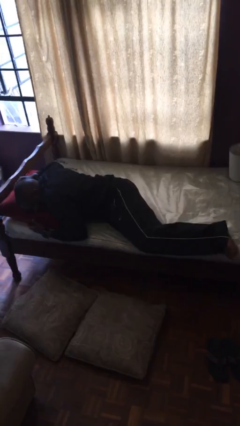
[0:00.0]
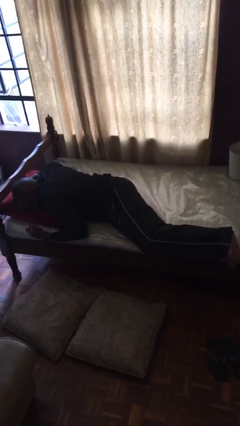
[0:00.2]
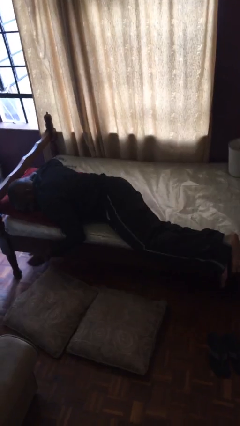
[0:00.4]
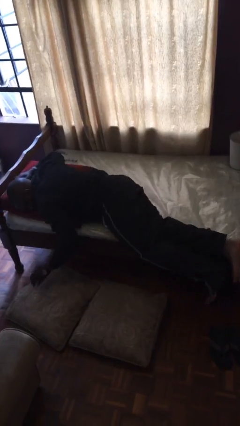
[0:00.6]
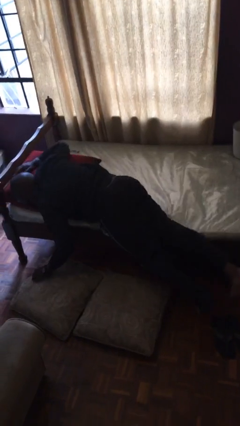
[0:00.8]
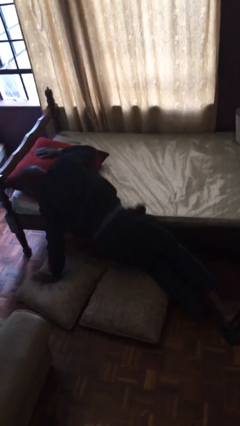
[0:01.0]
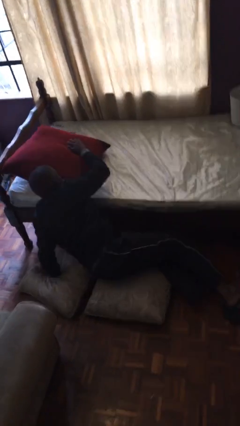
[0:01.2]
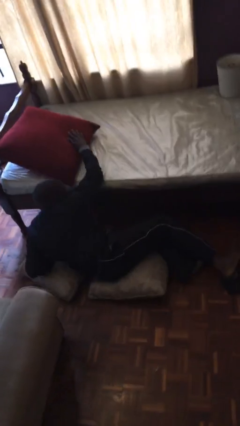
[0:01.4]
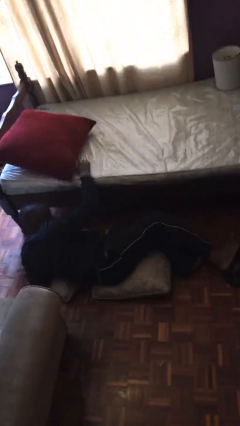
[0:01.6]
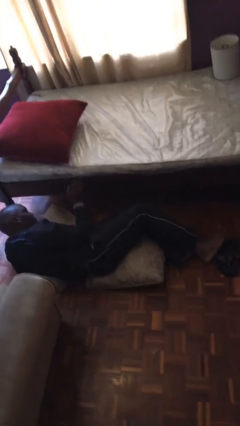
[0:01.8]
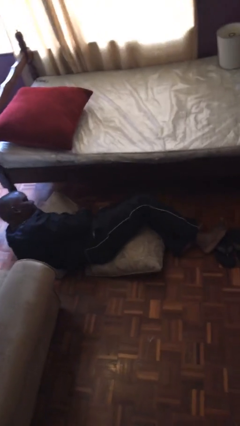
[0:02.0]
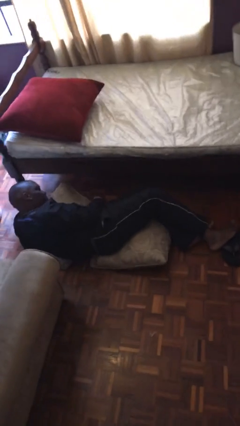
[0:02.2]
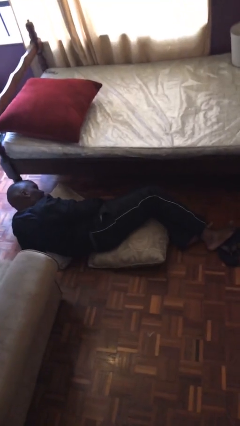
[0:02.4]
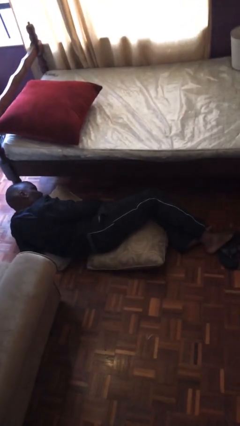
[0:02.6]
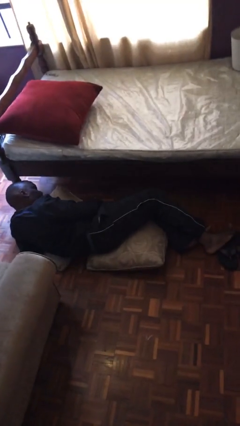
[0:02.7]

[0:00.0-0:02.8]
person falls from bed

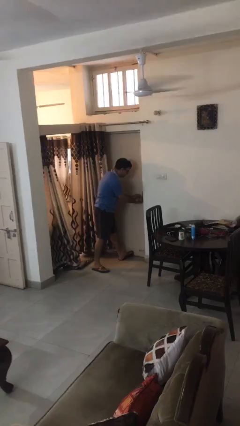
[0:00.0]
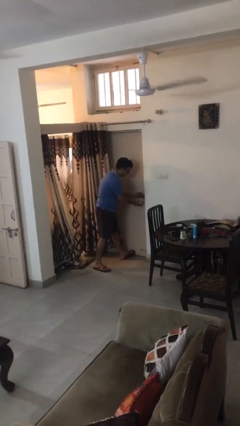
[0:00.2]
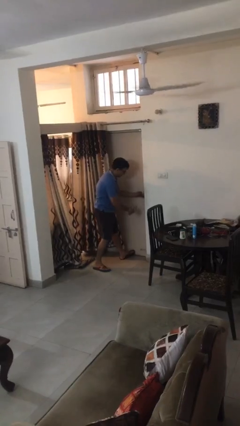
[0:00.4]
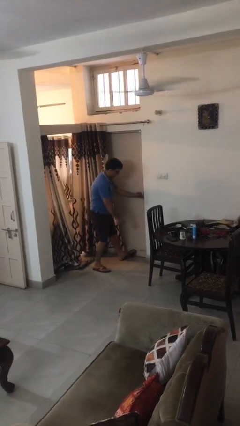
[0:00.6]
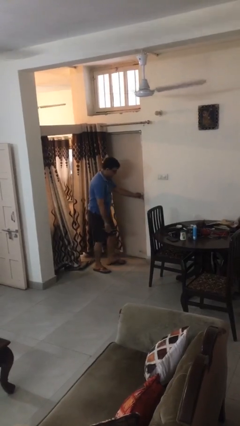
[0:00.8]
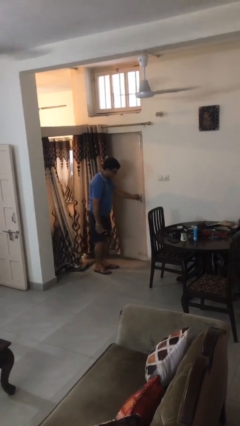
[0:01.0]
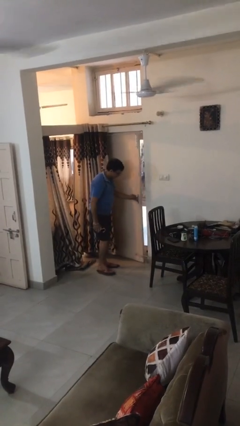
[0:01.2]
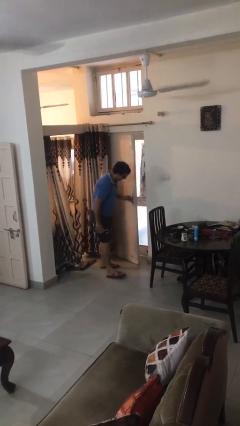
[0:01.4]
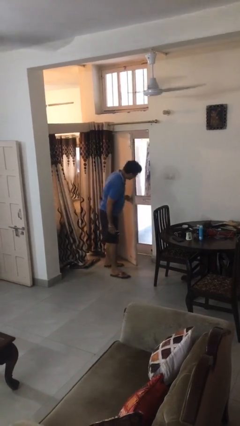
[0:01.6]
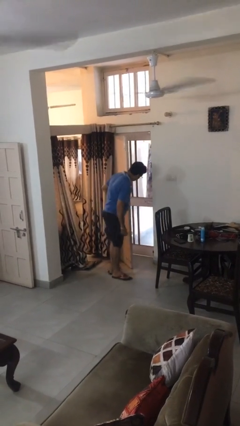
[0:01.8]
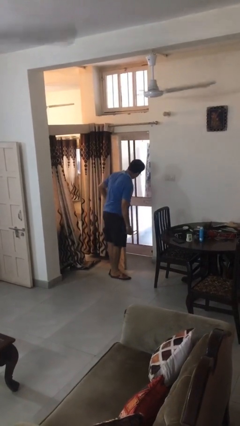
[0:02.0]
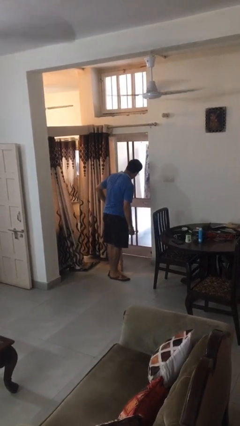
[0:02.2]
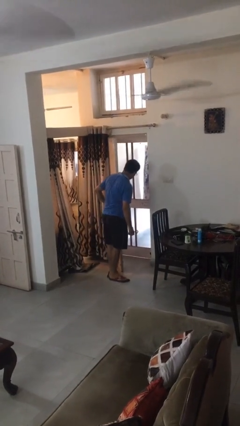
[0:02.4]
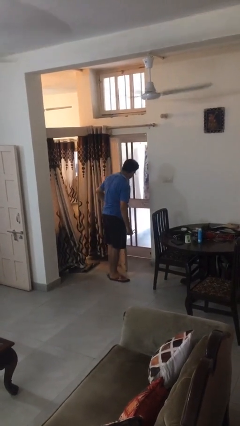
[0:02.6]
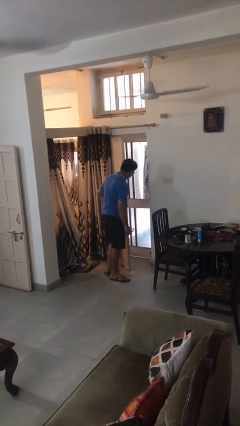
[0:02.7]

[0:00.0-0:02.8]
person opens facility door

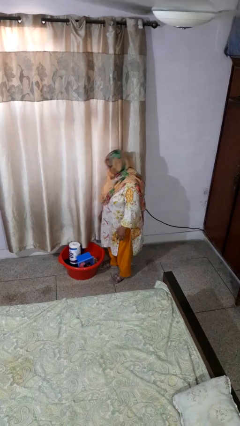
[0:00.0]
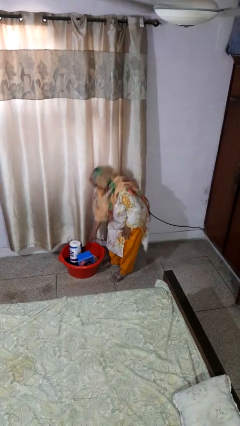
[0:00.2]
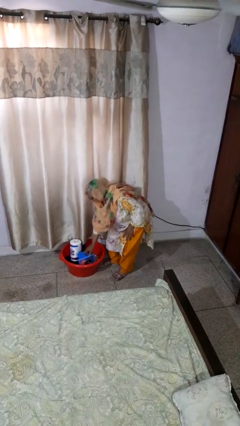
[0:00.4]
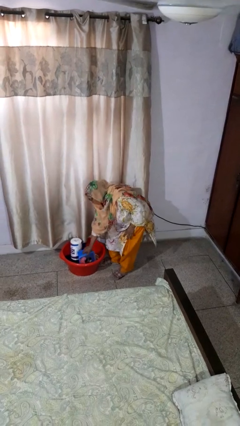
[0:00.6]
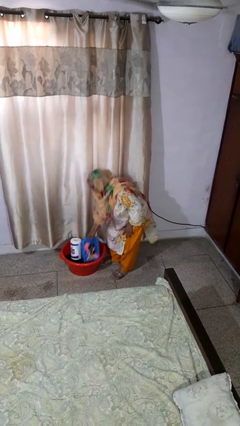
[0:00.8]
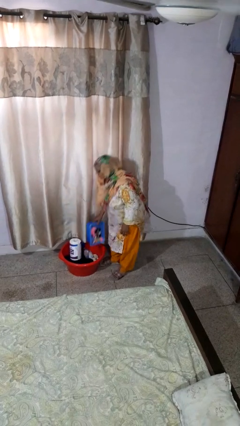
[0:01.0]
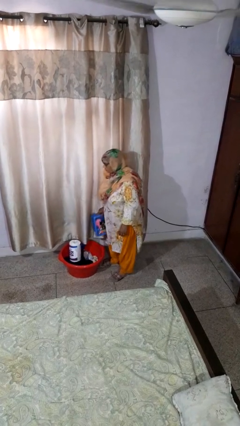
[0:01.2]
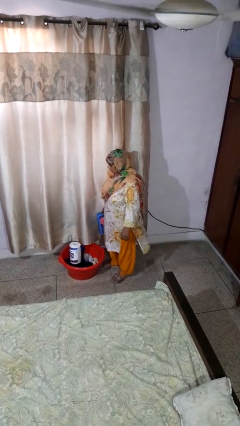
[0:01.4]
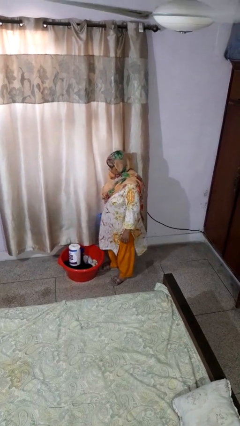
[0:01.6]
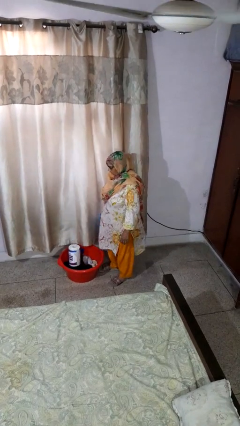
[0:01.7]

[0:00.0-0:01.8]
person takes object from basket

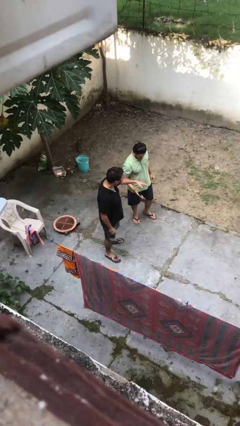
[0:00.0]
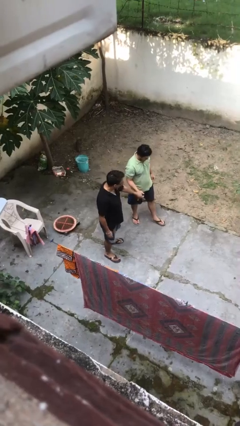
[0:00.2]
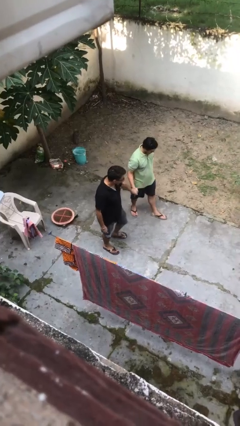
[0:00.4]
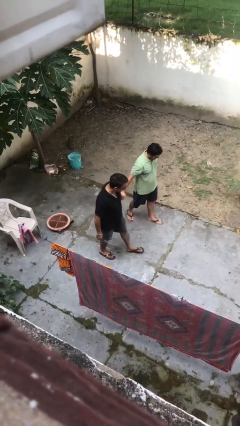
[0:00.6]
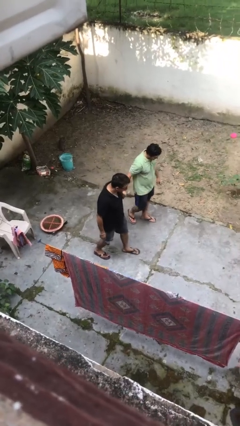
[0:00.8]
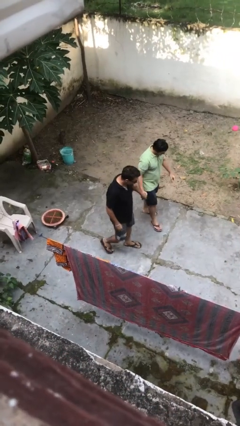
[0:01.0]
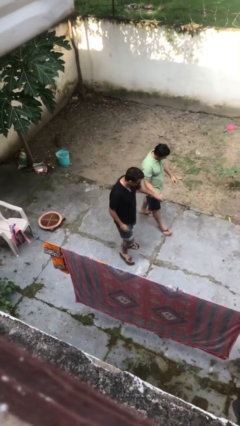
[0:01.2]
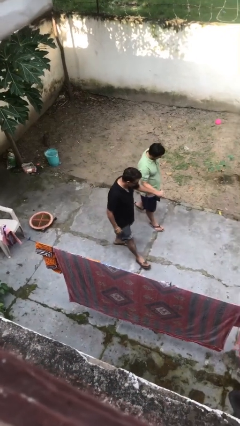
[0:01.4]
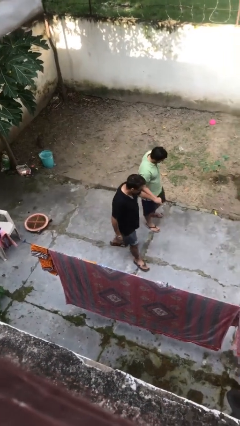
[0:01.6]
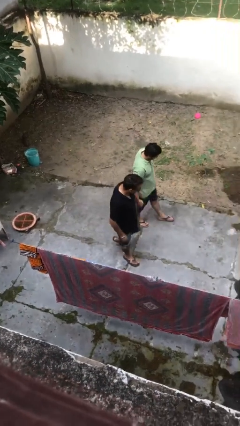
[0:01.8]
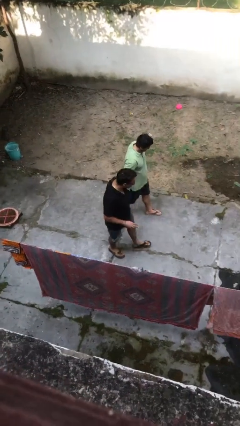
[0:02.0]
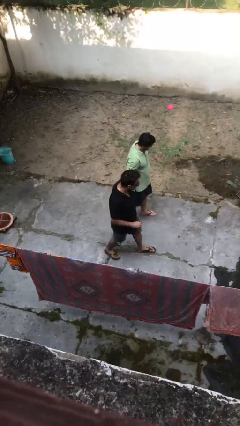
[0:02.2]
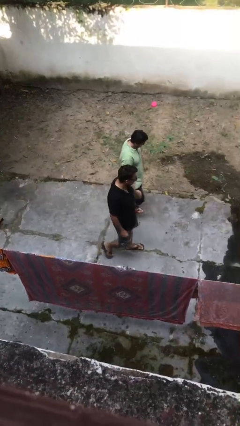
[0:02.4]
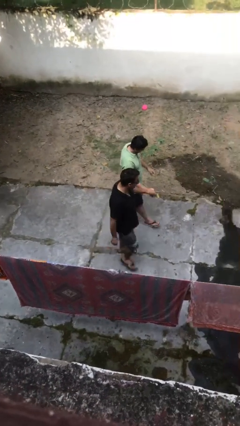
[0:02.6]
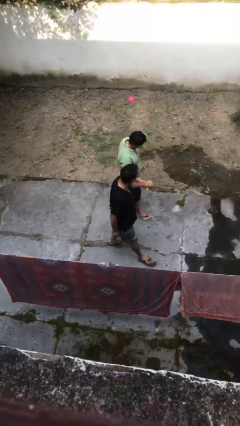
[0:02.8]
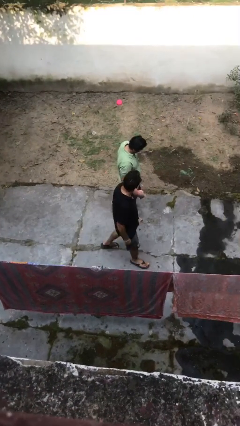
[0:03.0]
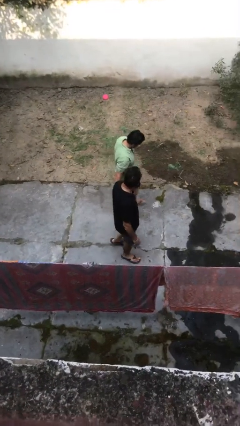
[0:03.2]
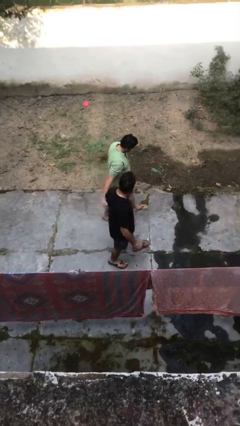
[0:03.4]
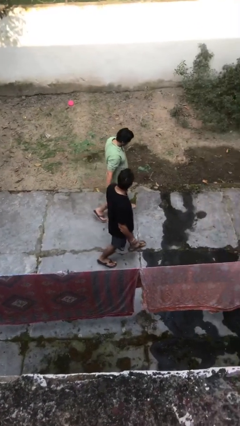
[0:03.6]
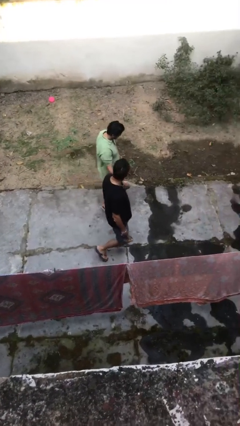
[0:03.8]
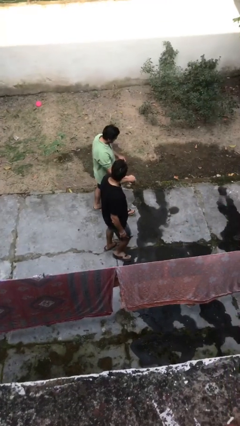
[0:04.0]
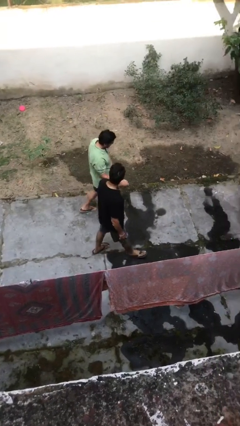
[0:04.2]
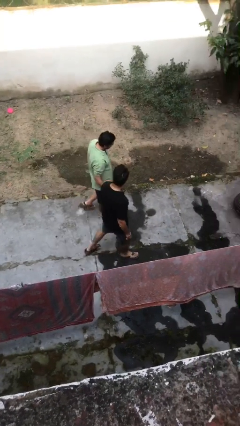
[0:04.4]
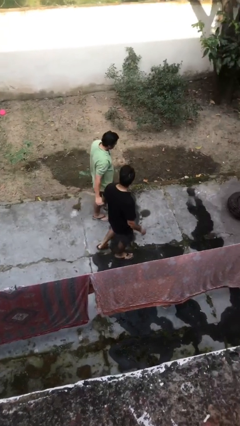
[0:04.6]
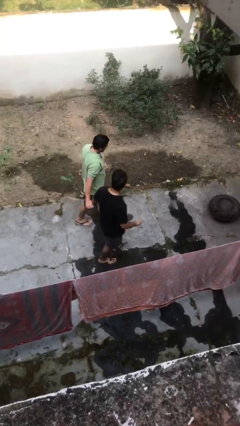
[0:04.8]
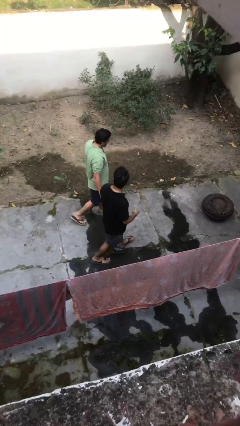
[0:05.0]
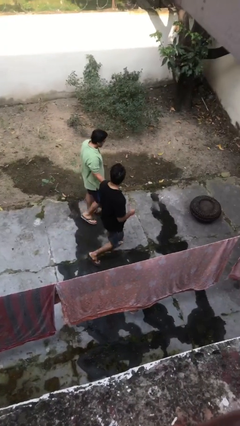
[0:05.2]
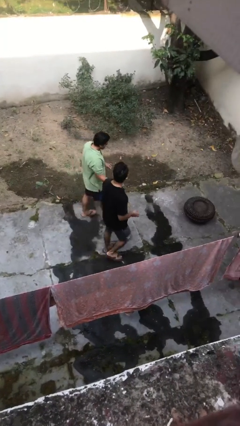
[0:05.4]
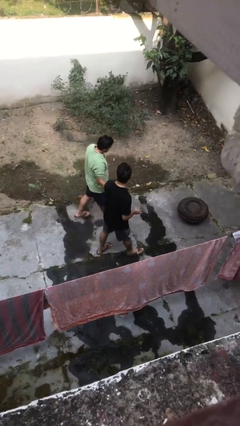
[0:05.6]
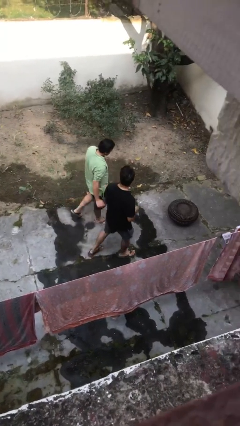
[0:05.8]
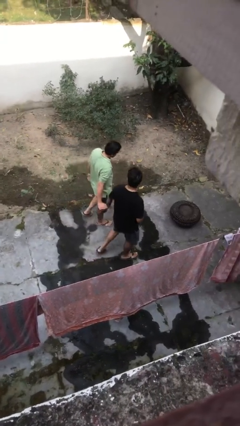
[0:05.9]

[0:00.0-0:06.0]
person holds hand

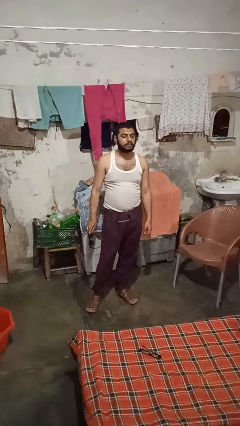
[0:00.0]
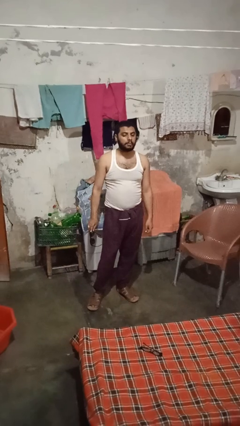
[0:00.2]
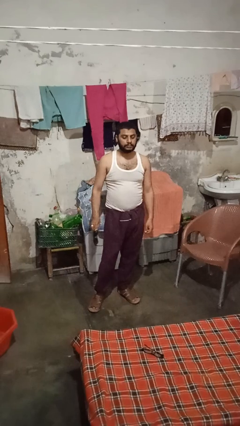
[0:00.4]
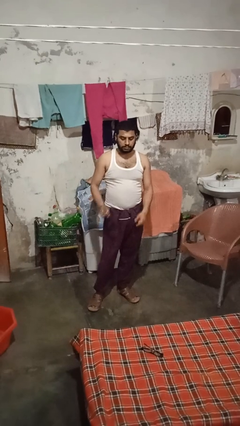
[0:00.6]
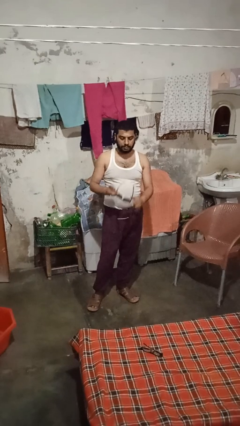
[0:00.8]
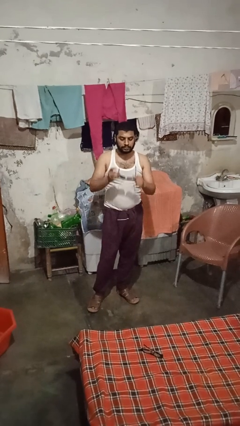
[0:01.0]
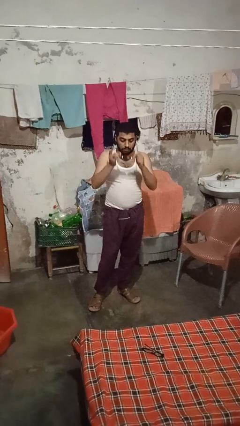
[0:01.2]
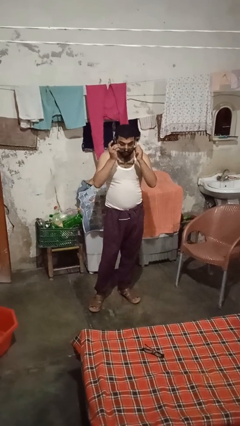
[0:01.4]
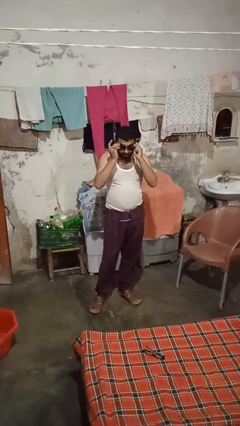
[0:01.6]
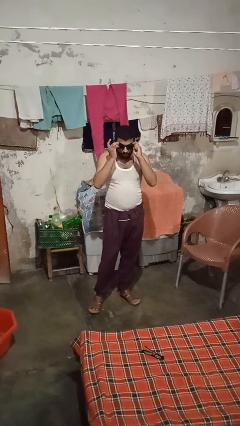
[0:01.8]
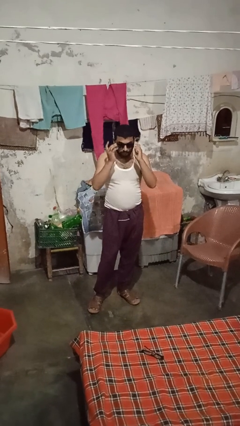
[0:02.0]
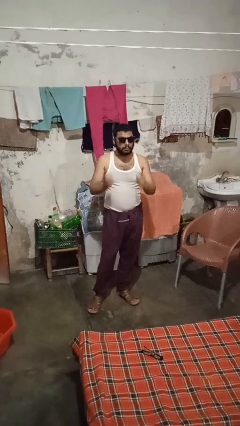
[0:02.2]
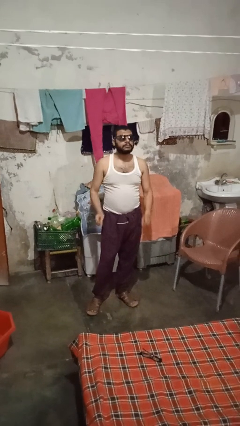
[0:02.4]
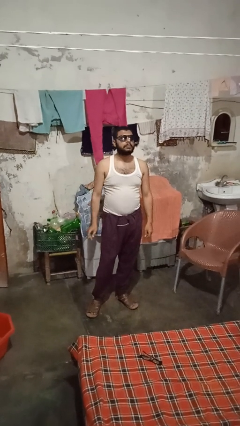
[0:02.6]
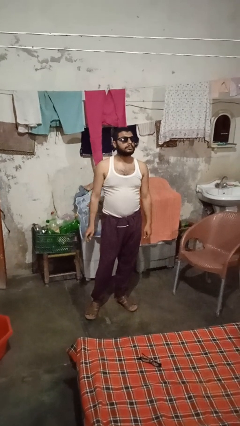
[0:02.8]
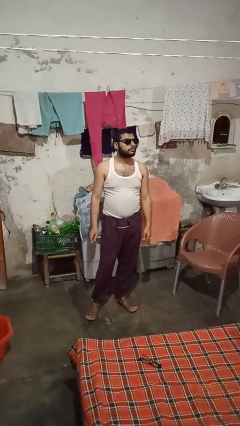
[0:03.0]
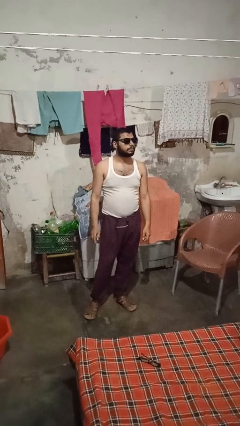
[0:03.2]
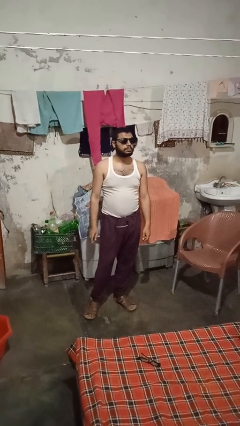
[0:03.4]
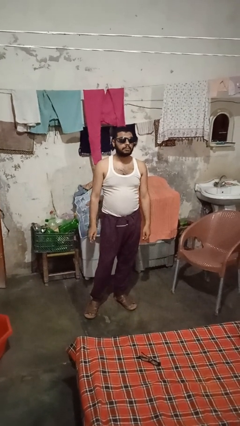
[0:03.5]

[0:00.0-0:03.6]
person puts on sunglasses

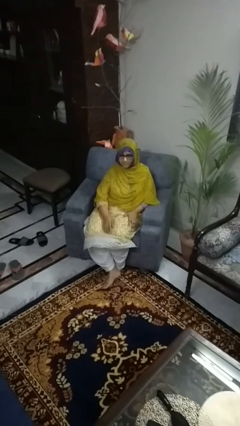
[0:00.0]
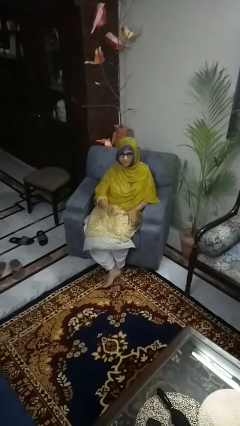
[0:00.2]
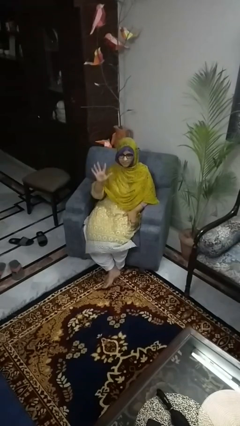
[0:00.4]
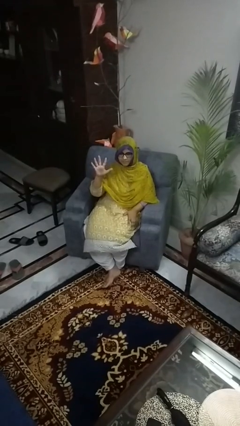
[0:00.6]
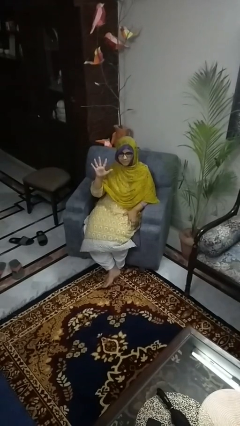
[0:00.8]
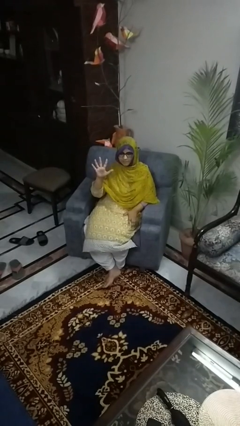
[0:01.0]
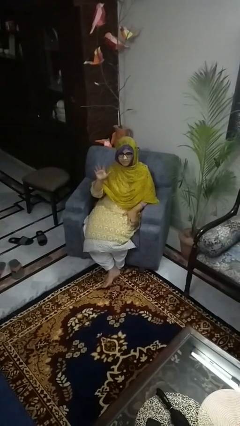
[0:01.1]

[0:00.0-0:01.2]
person gestures number five
